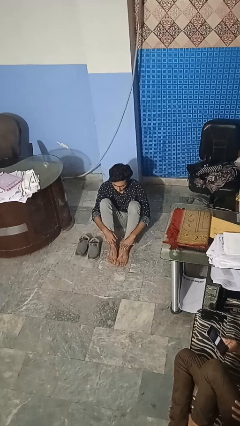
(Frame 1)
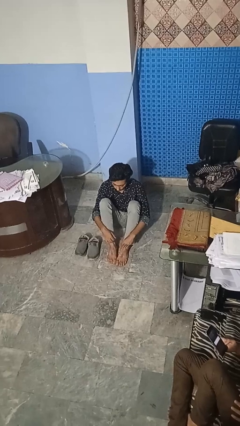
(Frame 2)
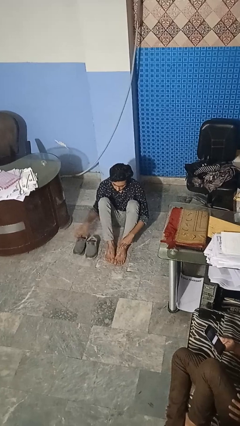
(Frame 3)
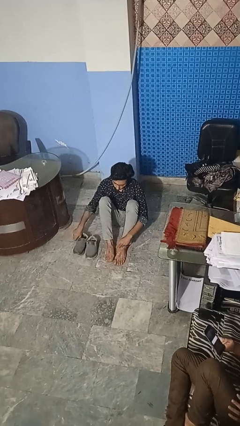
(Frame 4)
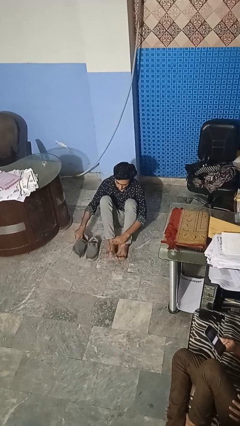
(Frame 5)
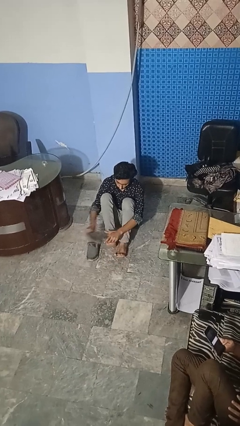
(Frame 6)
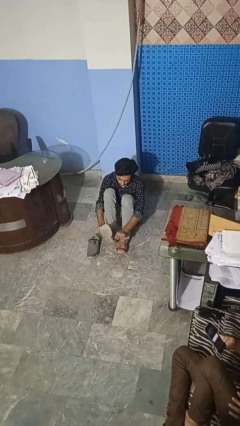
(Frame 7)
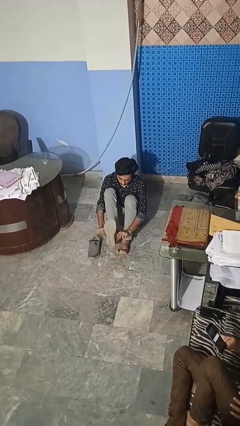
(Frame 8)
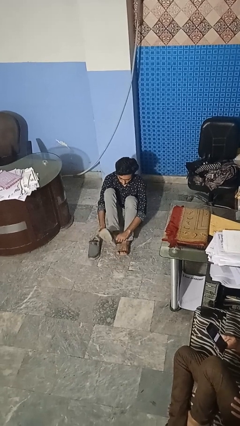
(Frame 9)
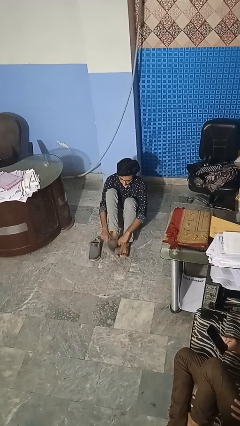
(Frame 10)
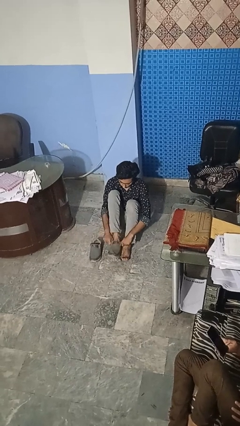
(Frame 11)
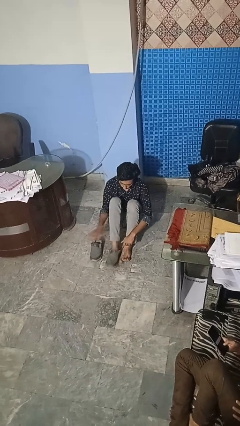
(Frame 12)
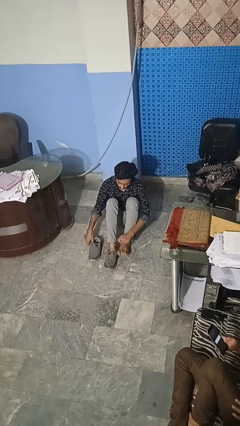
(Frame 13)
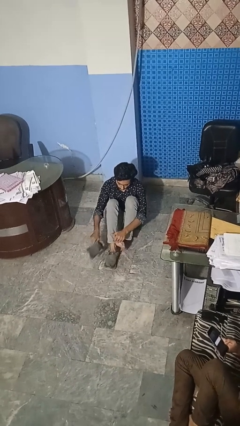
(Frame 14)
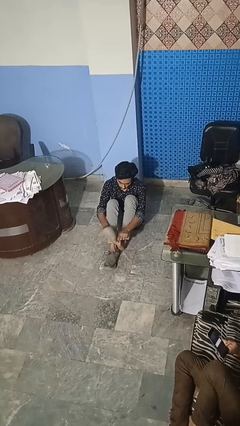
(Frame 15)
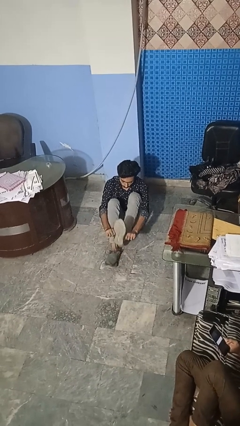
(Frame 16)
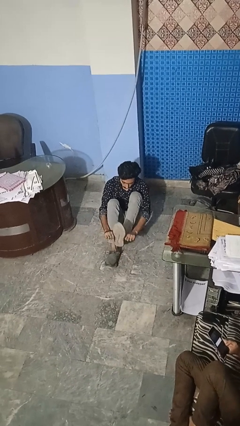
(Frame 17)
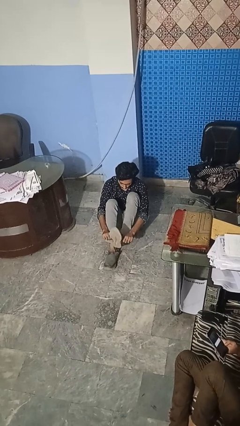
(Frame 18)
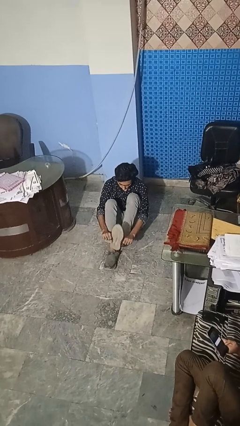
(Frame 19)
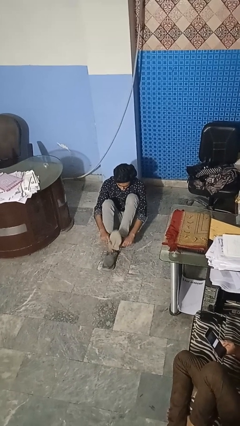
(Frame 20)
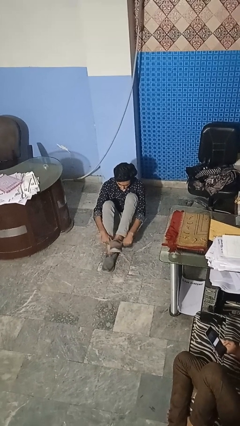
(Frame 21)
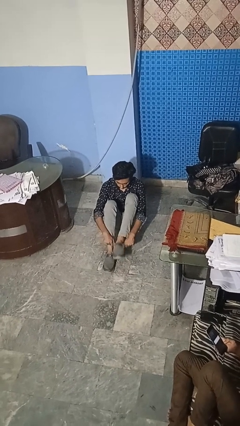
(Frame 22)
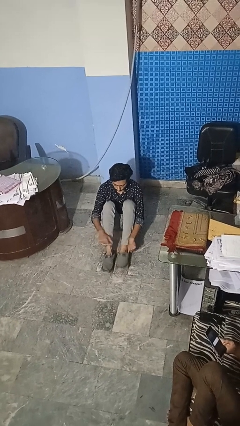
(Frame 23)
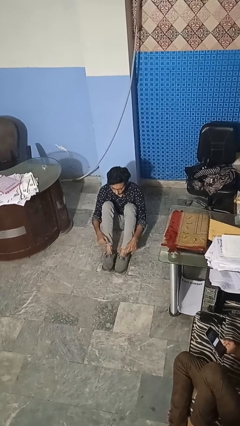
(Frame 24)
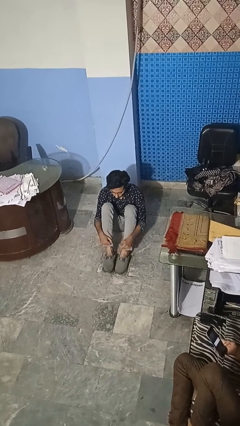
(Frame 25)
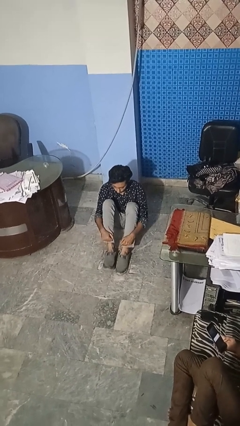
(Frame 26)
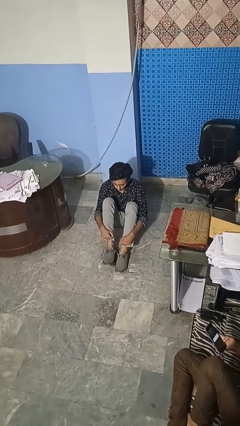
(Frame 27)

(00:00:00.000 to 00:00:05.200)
person puts on shoes

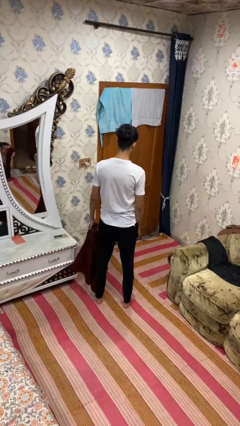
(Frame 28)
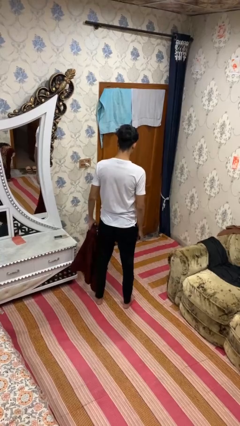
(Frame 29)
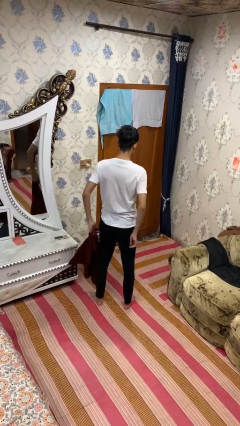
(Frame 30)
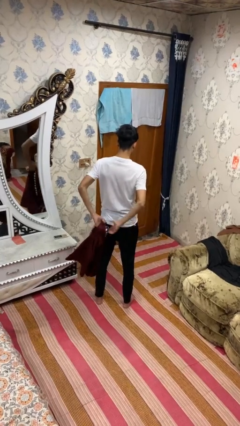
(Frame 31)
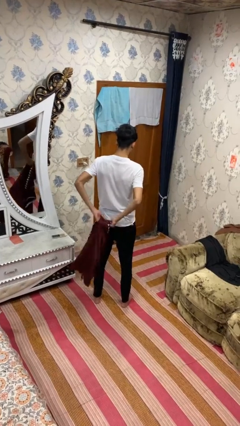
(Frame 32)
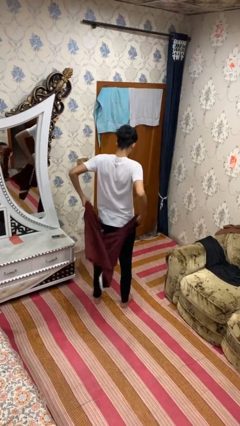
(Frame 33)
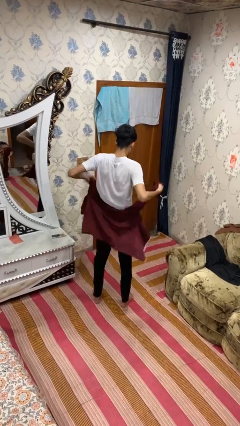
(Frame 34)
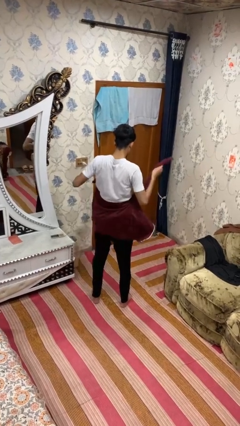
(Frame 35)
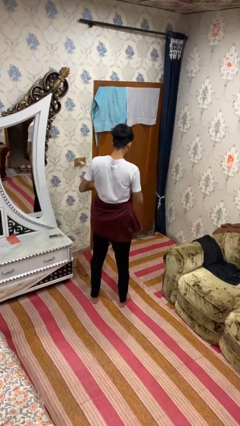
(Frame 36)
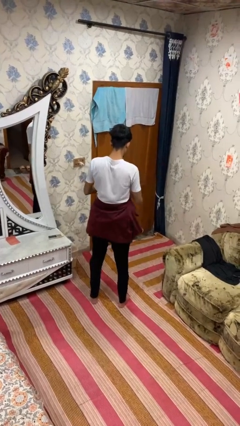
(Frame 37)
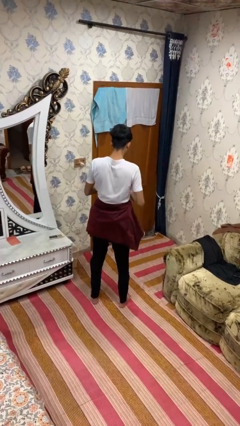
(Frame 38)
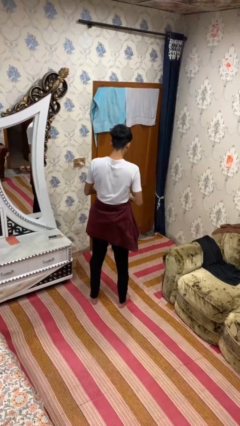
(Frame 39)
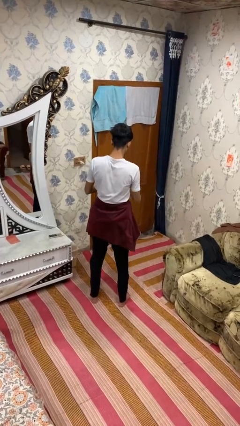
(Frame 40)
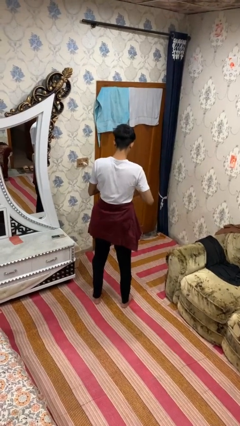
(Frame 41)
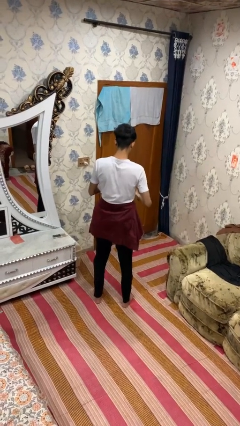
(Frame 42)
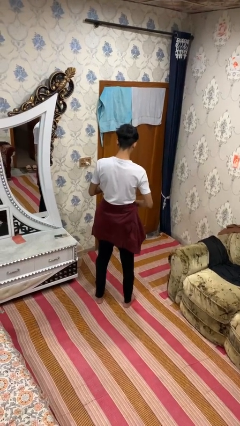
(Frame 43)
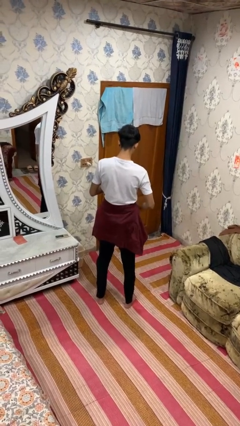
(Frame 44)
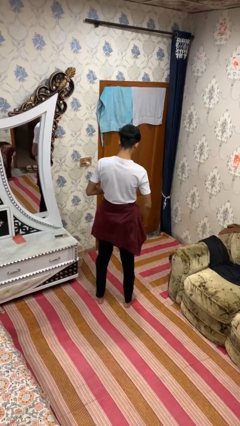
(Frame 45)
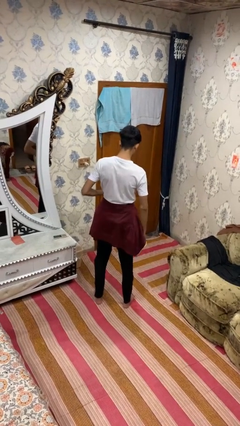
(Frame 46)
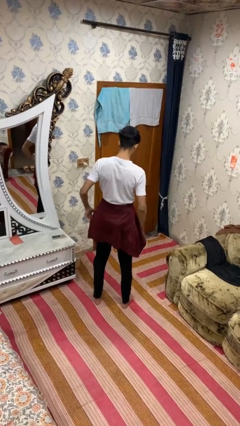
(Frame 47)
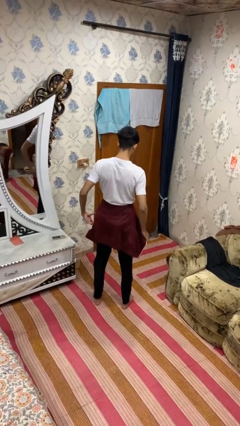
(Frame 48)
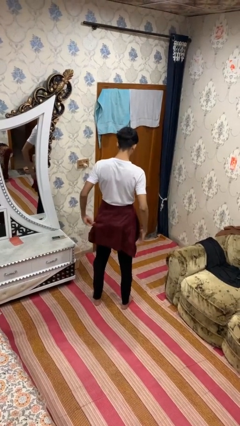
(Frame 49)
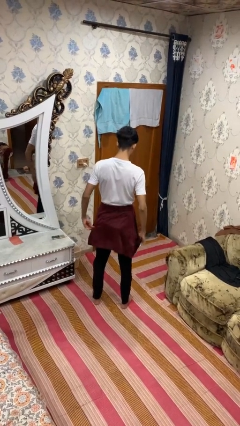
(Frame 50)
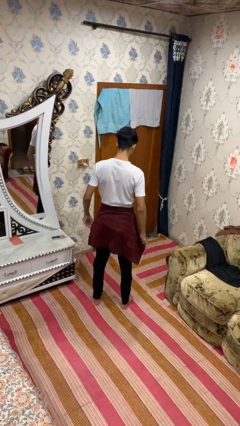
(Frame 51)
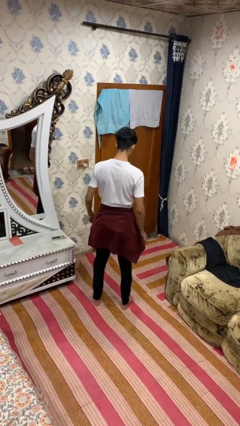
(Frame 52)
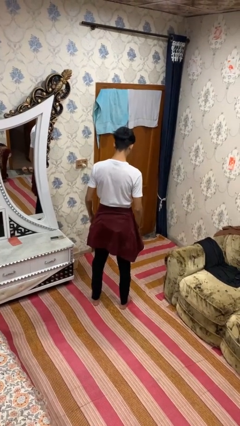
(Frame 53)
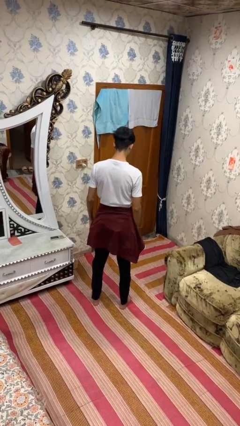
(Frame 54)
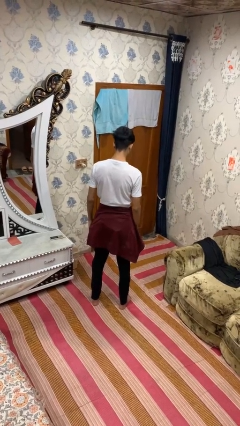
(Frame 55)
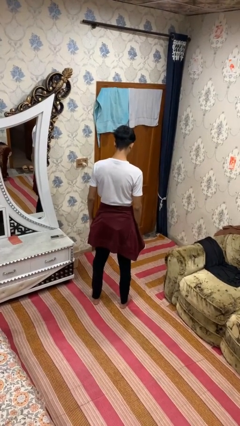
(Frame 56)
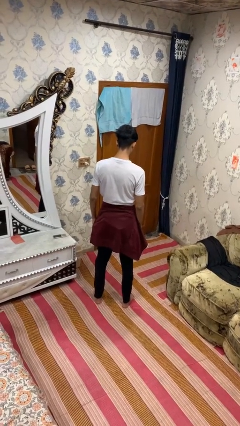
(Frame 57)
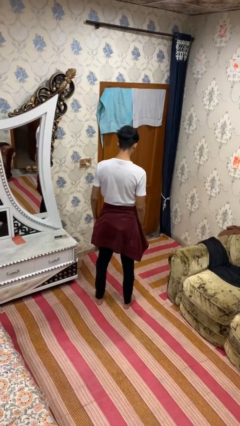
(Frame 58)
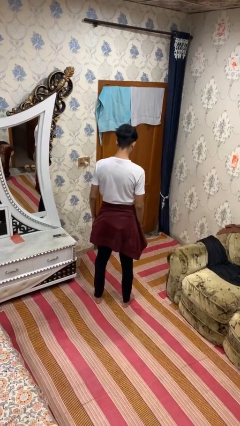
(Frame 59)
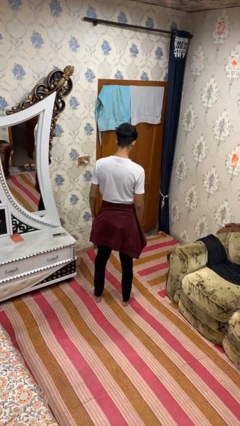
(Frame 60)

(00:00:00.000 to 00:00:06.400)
person ties jacket around waist

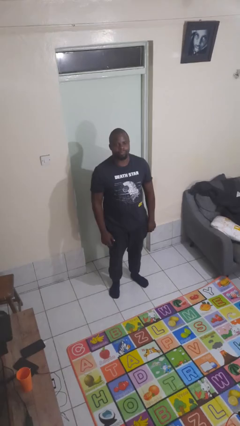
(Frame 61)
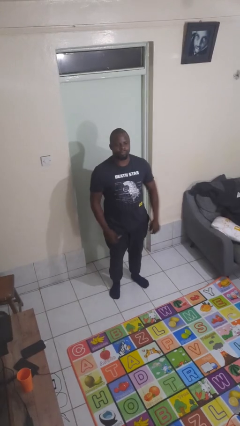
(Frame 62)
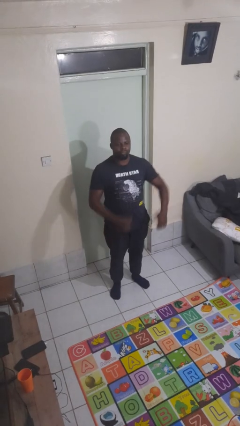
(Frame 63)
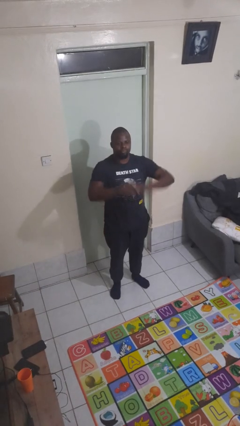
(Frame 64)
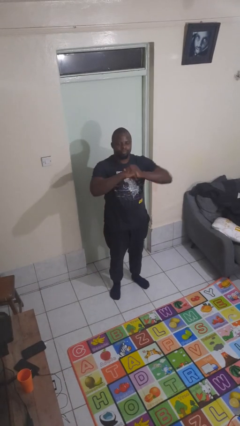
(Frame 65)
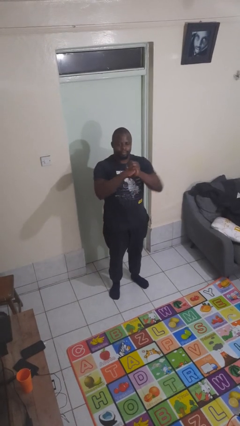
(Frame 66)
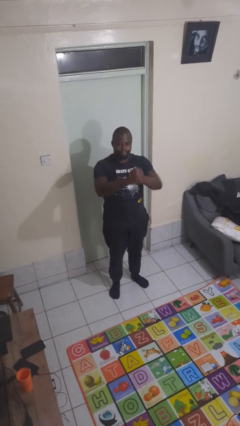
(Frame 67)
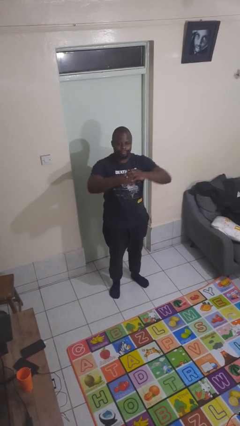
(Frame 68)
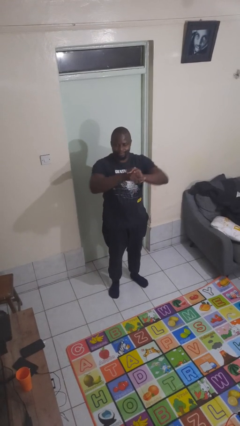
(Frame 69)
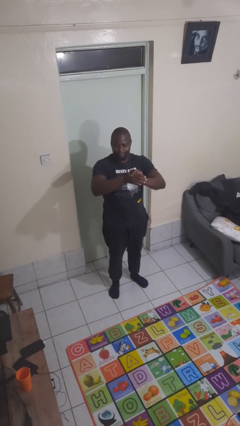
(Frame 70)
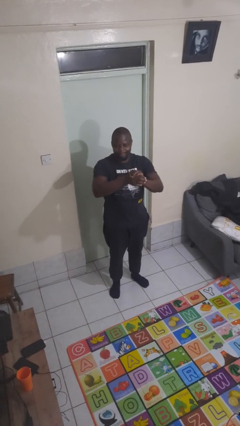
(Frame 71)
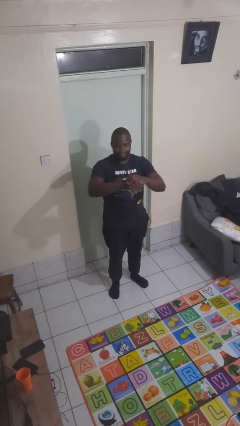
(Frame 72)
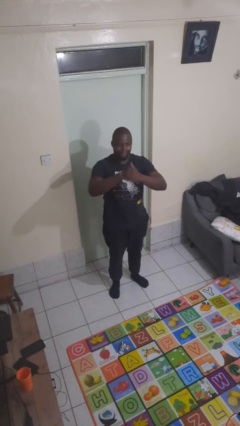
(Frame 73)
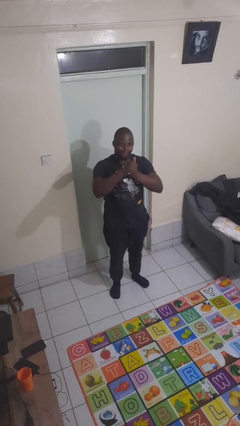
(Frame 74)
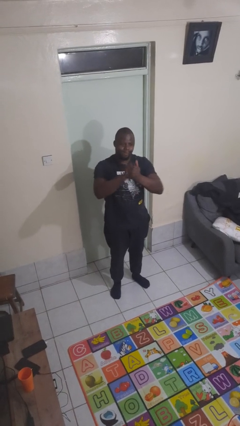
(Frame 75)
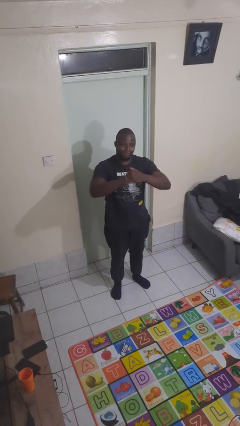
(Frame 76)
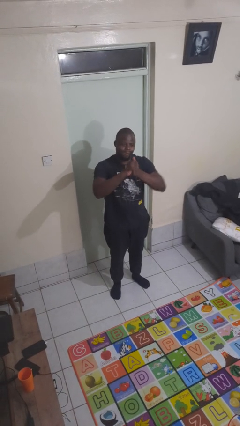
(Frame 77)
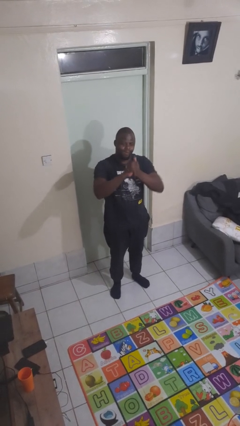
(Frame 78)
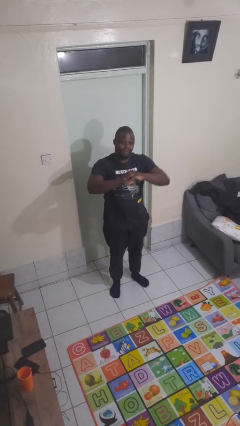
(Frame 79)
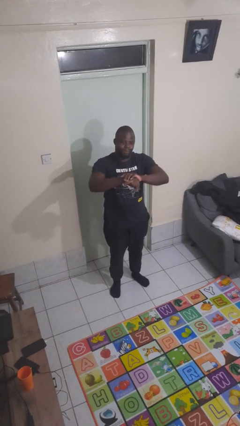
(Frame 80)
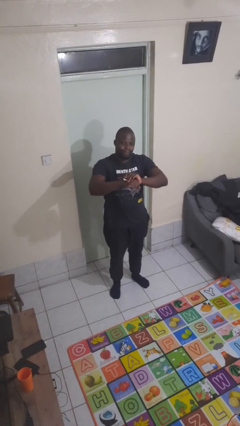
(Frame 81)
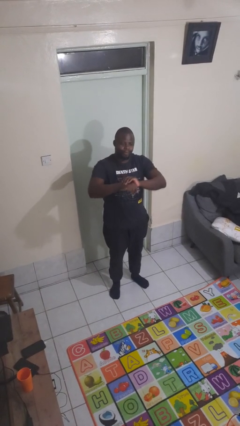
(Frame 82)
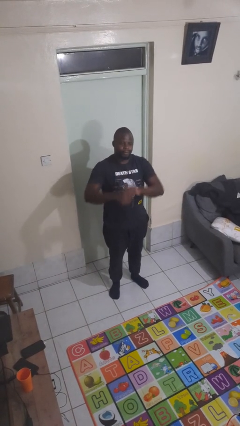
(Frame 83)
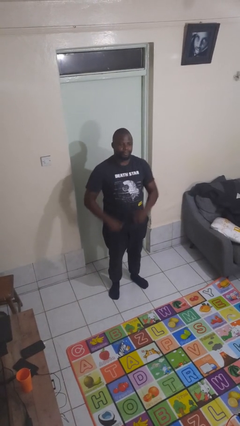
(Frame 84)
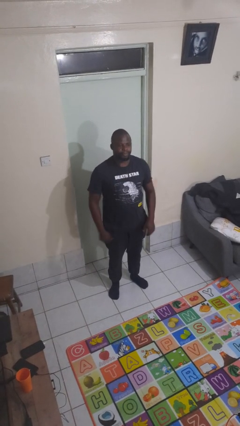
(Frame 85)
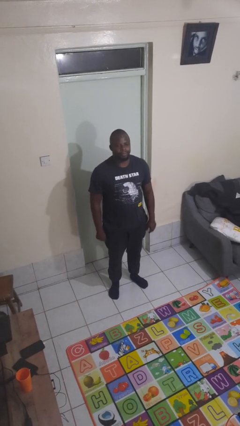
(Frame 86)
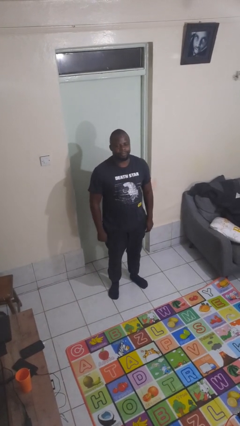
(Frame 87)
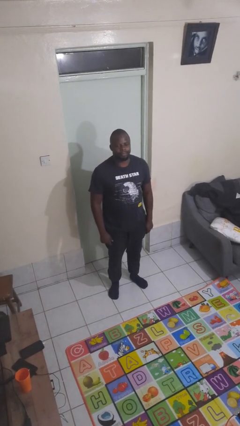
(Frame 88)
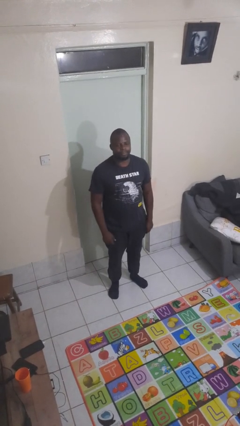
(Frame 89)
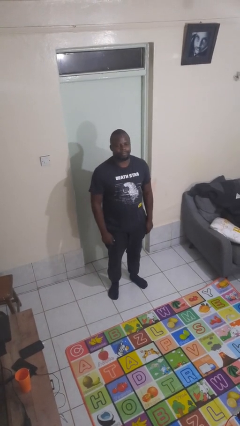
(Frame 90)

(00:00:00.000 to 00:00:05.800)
person cracks knuckles

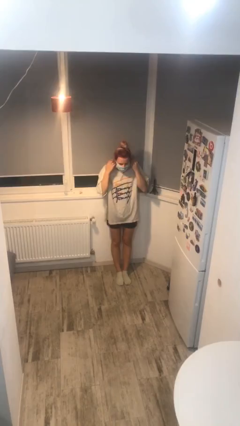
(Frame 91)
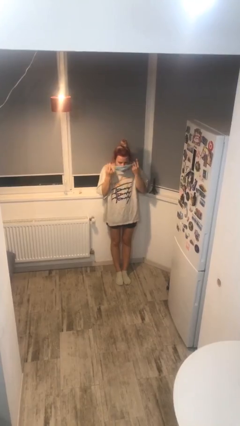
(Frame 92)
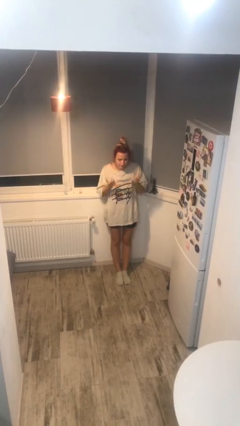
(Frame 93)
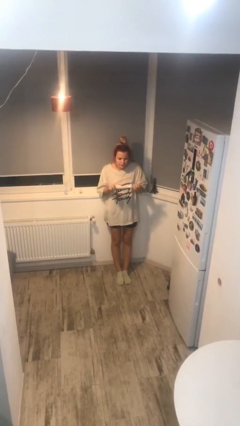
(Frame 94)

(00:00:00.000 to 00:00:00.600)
person takes off facemask
